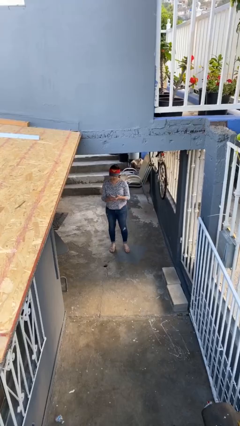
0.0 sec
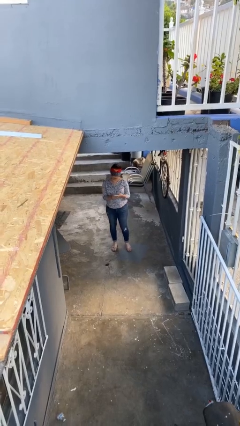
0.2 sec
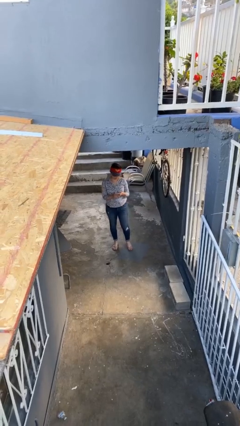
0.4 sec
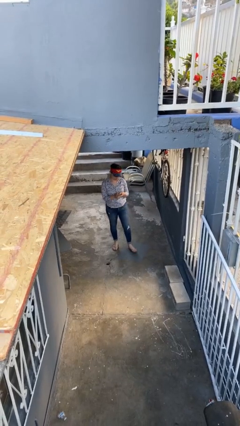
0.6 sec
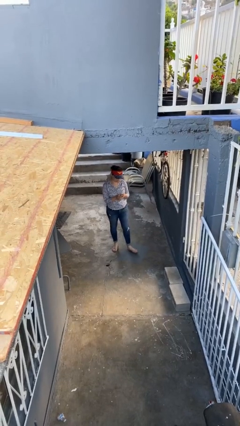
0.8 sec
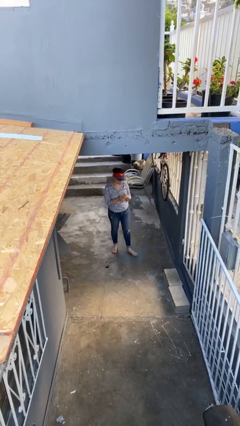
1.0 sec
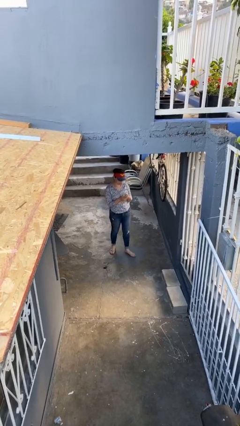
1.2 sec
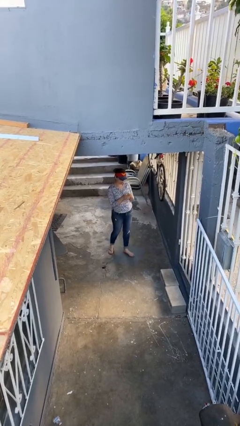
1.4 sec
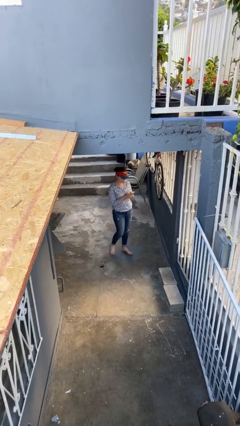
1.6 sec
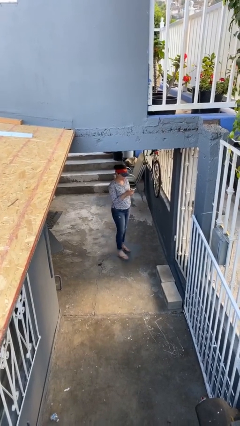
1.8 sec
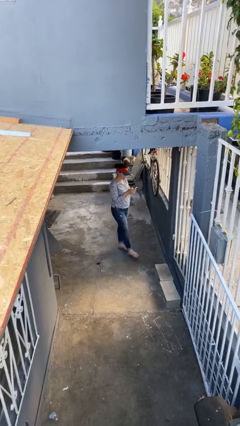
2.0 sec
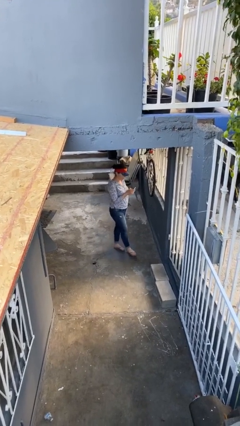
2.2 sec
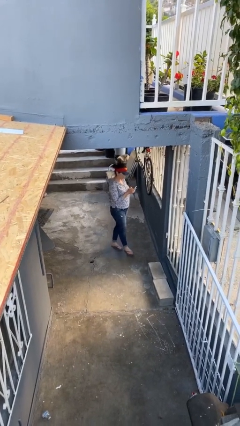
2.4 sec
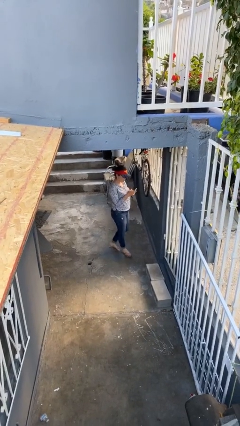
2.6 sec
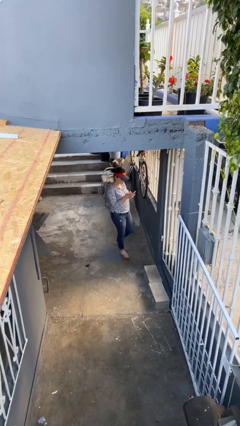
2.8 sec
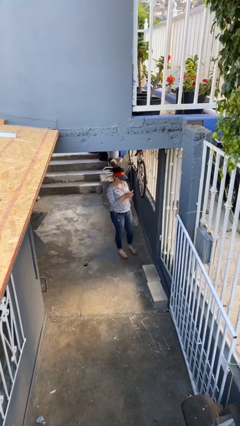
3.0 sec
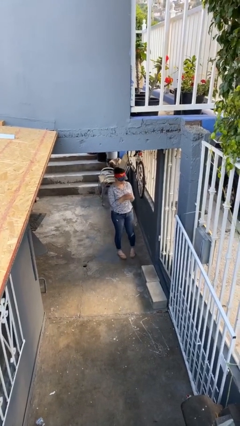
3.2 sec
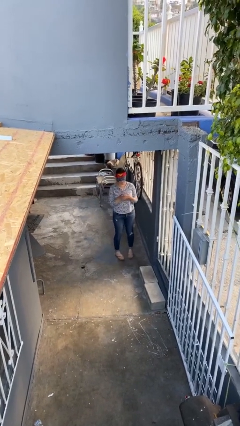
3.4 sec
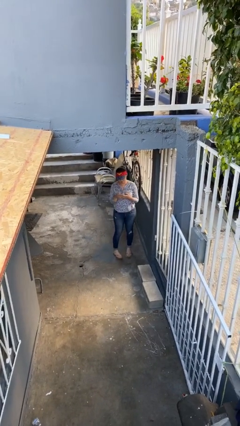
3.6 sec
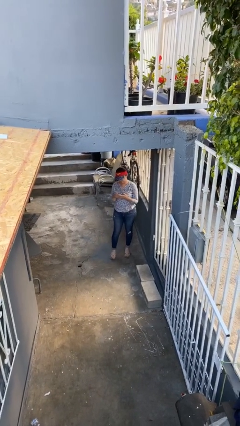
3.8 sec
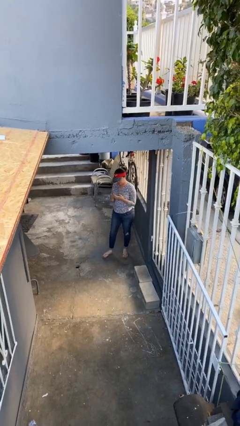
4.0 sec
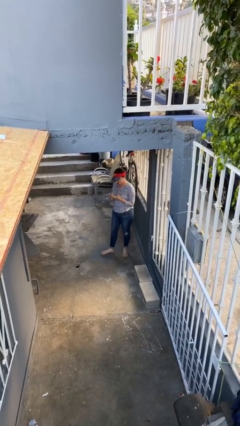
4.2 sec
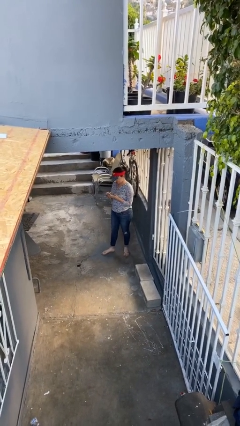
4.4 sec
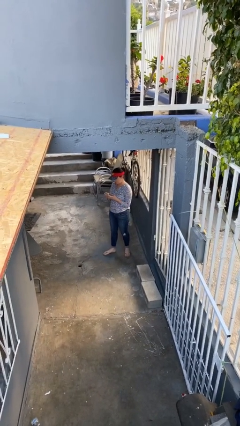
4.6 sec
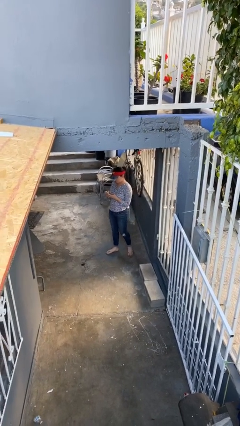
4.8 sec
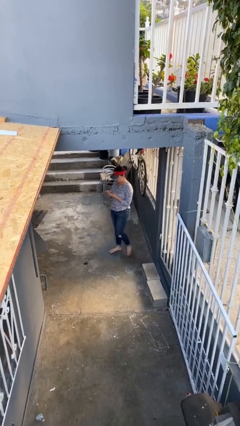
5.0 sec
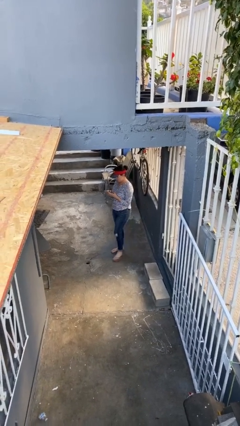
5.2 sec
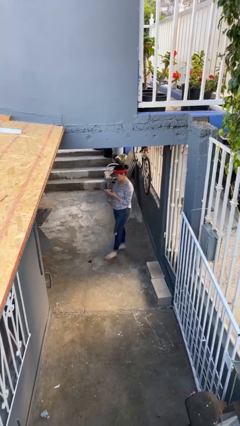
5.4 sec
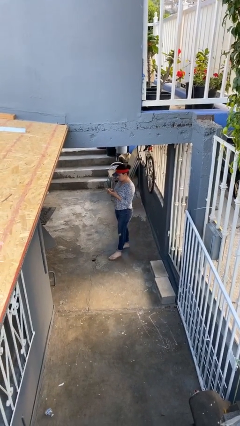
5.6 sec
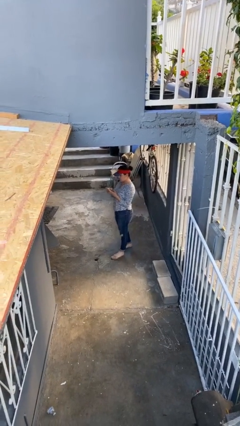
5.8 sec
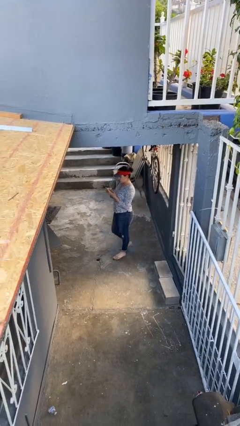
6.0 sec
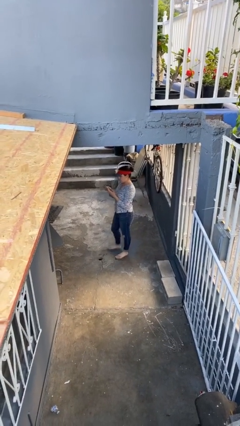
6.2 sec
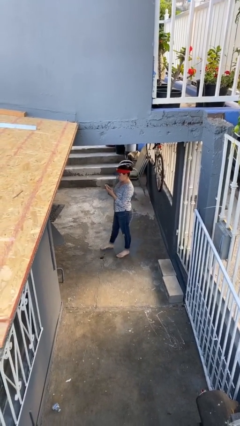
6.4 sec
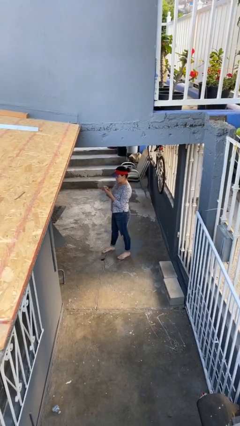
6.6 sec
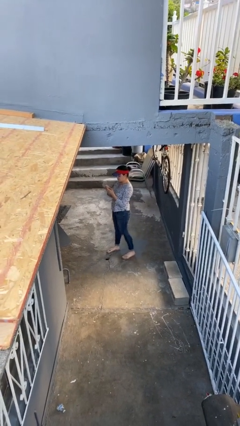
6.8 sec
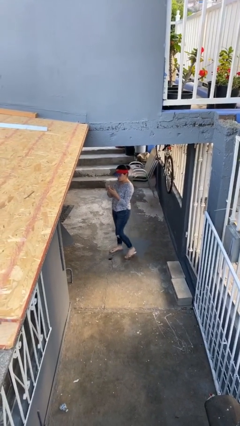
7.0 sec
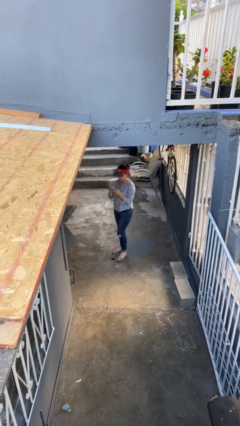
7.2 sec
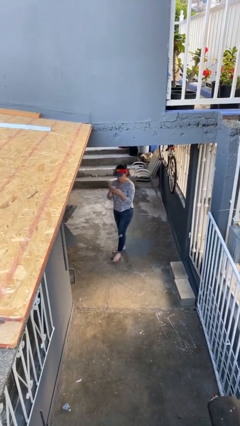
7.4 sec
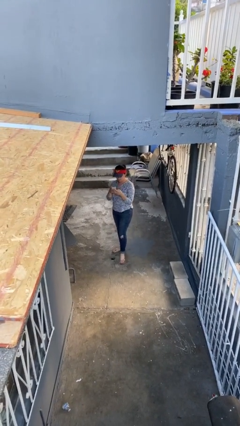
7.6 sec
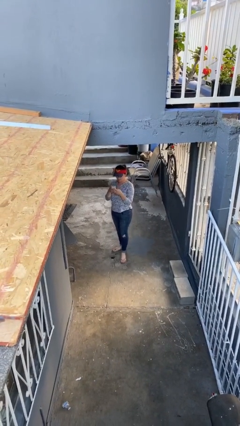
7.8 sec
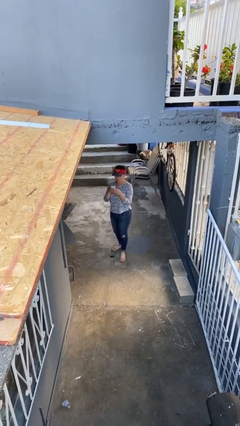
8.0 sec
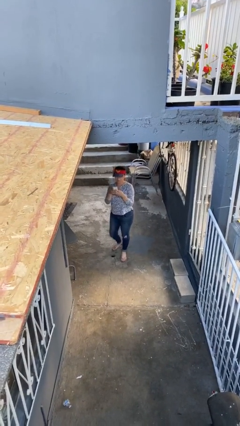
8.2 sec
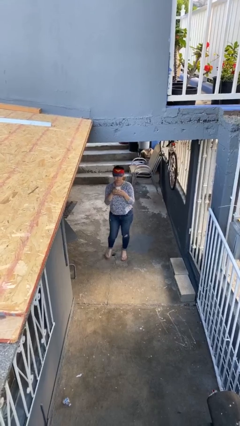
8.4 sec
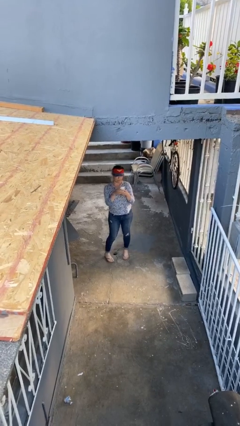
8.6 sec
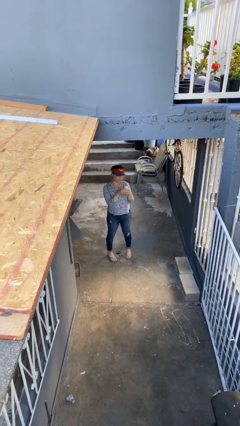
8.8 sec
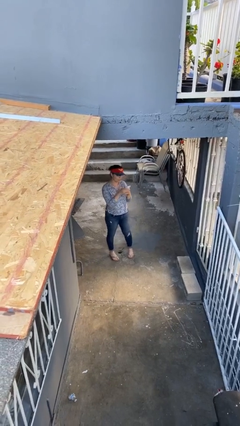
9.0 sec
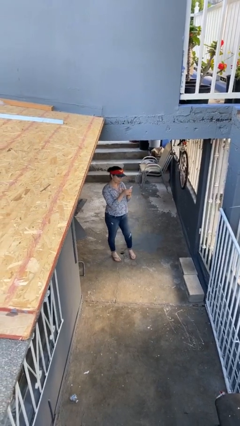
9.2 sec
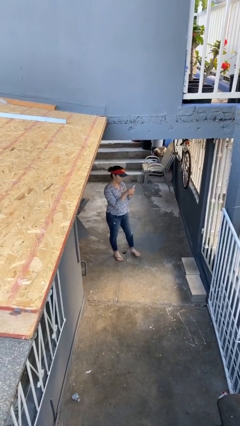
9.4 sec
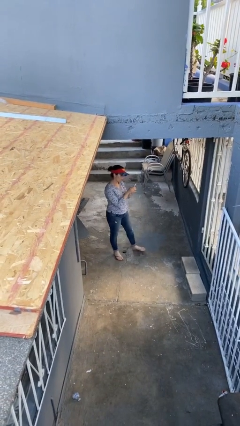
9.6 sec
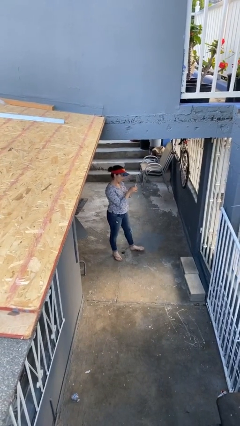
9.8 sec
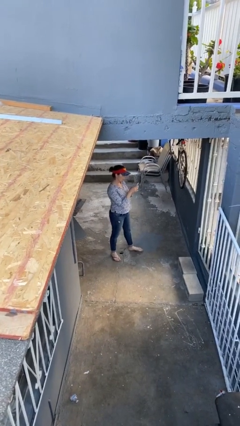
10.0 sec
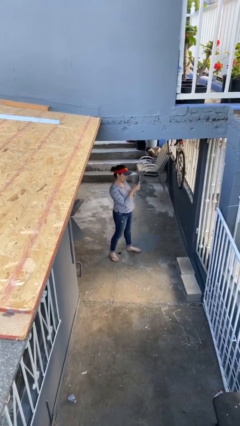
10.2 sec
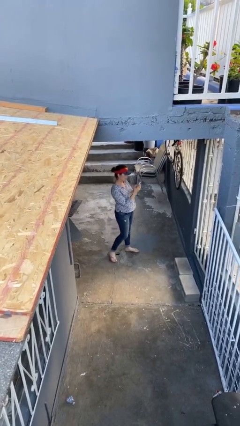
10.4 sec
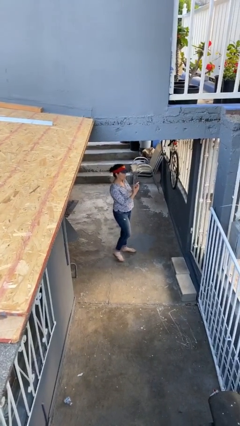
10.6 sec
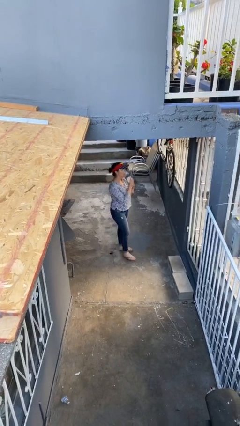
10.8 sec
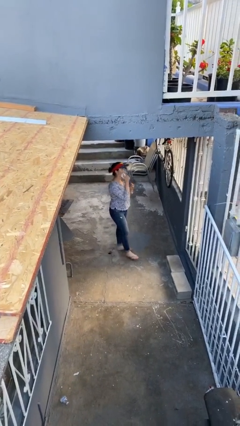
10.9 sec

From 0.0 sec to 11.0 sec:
person texts on phone

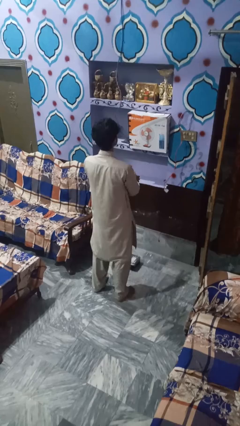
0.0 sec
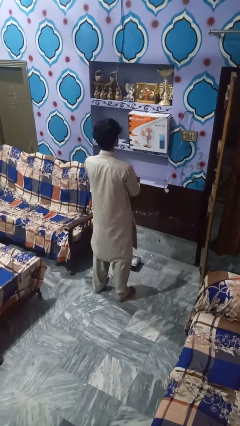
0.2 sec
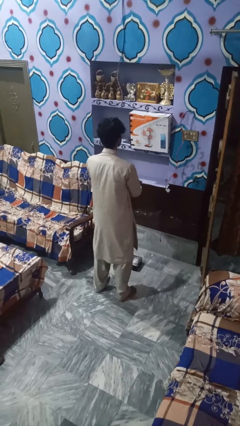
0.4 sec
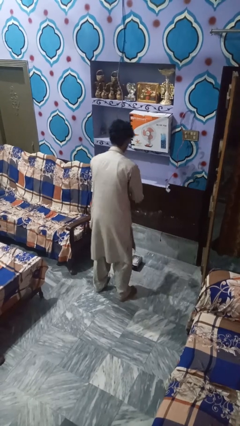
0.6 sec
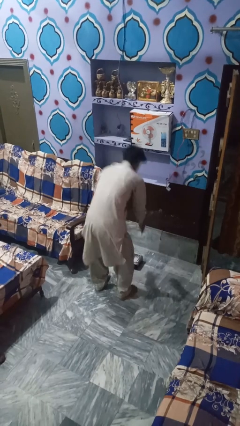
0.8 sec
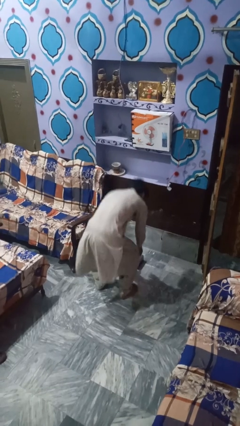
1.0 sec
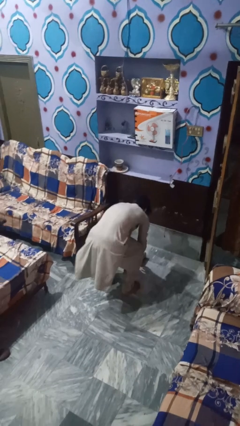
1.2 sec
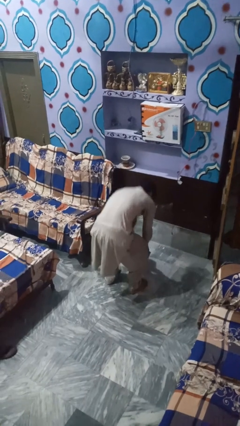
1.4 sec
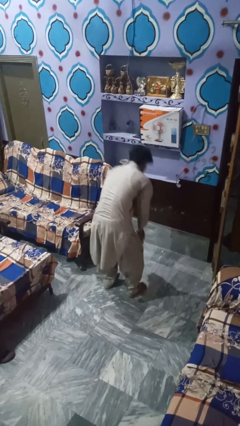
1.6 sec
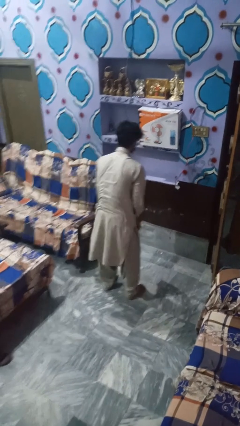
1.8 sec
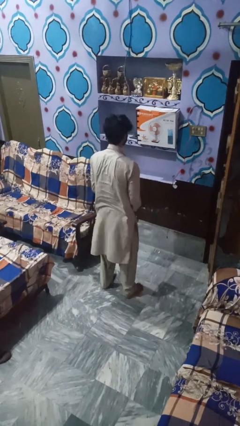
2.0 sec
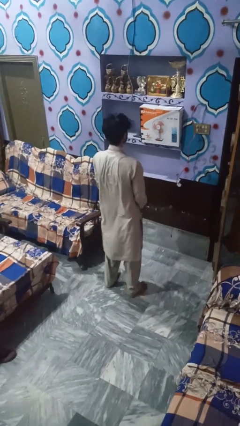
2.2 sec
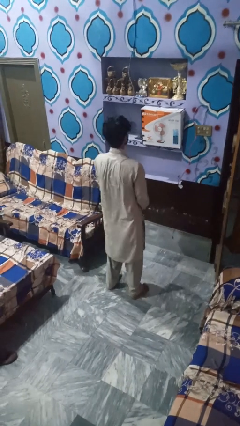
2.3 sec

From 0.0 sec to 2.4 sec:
person picks up object from floor

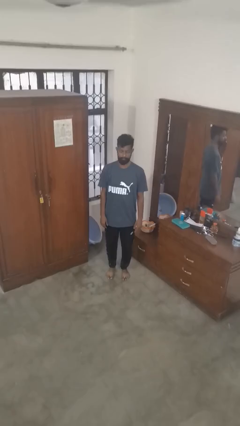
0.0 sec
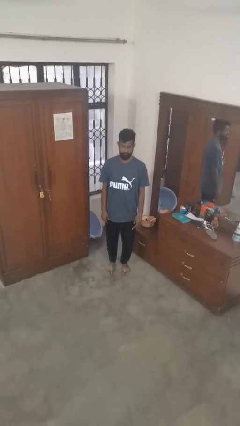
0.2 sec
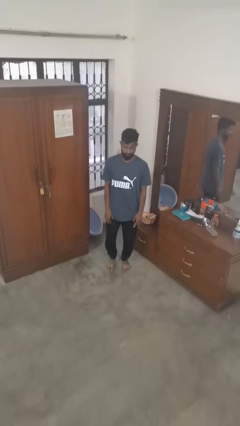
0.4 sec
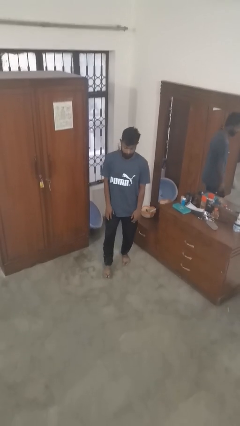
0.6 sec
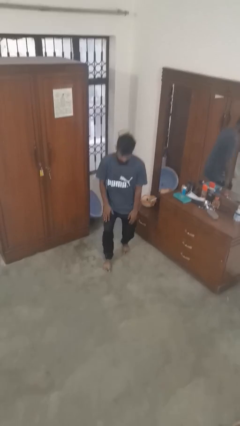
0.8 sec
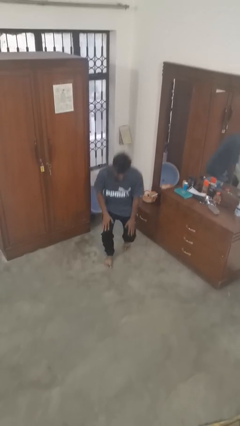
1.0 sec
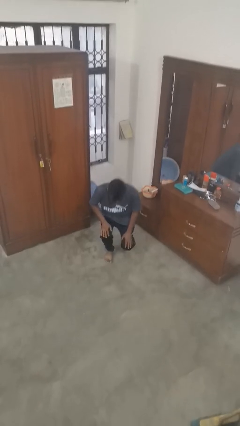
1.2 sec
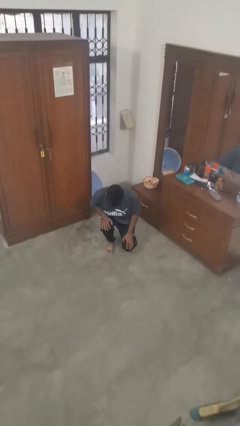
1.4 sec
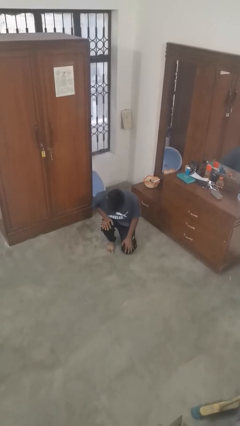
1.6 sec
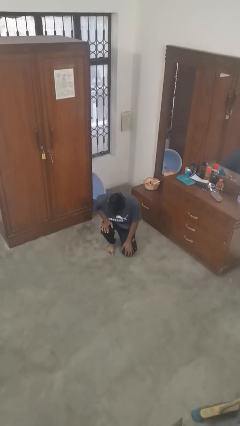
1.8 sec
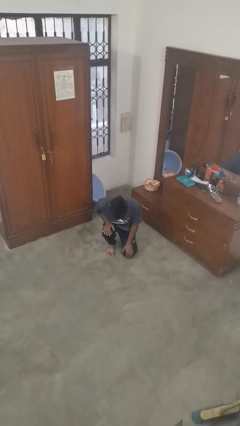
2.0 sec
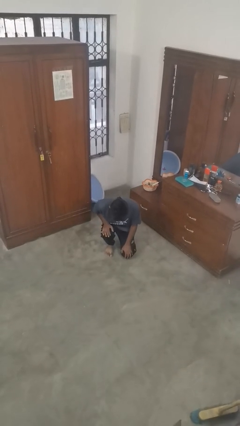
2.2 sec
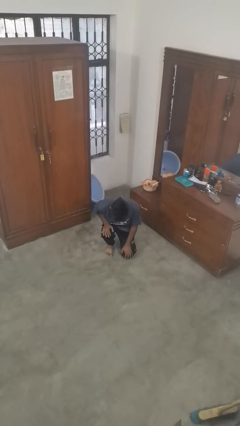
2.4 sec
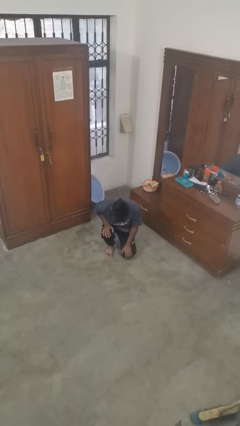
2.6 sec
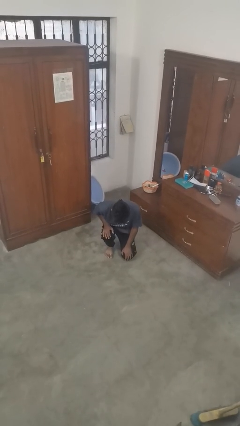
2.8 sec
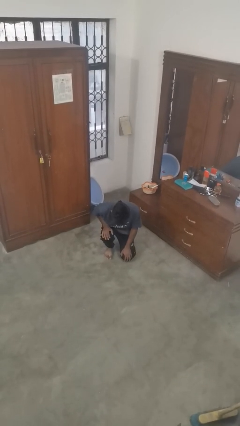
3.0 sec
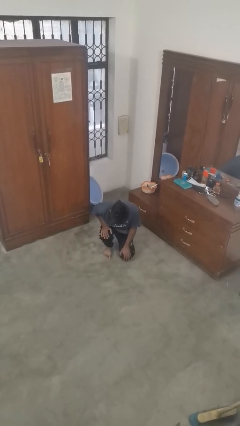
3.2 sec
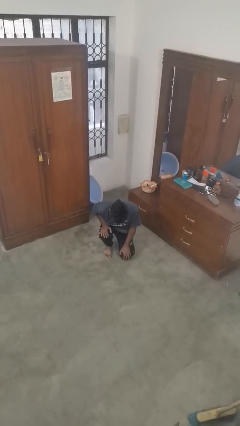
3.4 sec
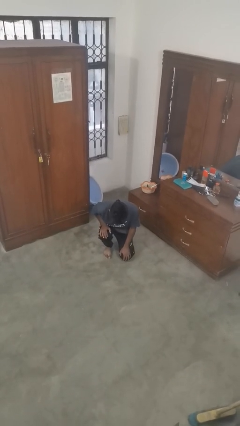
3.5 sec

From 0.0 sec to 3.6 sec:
person kneels

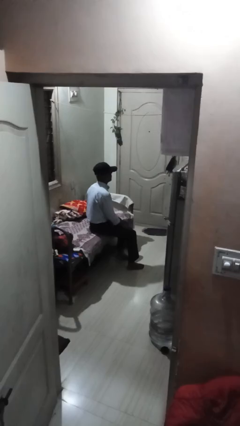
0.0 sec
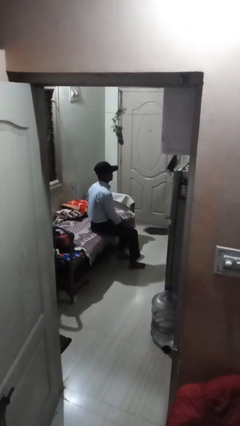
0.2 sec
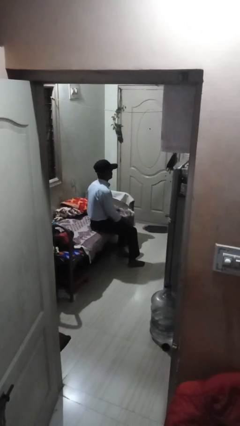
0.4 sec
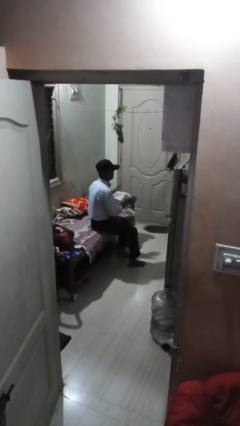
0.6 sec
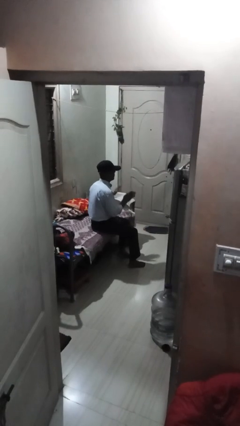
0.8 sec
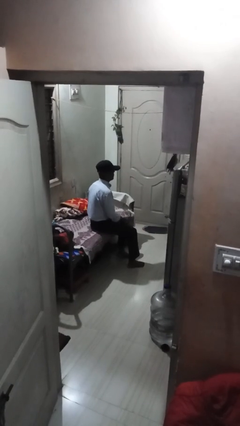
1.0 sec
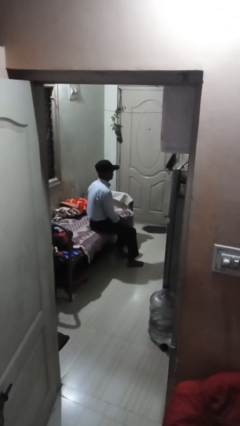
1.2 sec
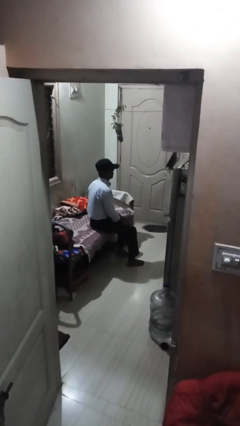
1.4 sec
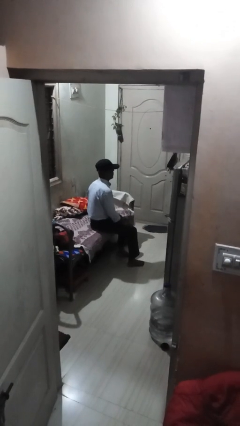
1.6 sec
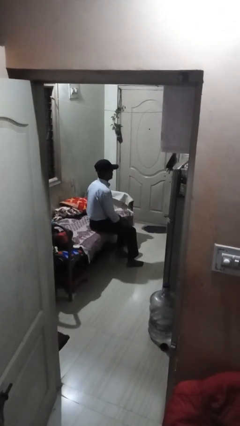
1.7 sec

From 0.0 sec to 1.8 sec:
person slaps hands on thighs
